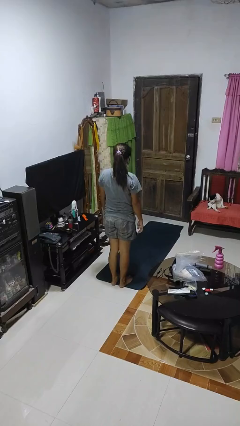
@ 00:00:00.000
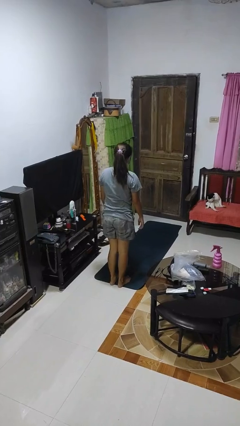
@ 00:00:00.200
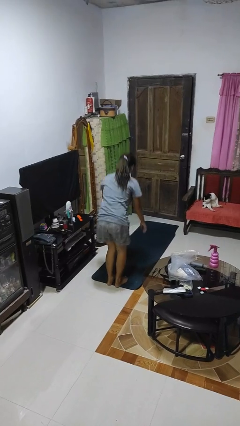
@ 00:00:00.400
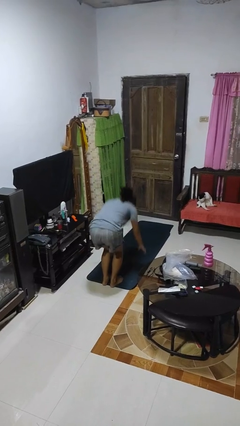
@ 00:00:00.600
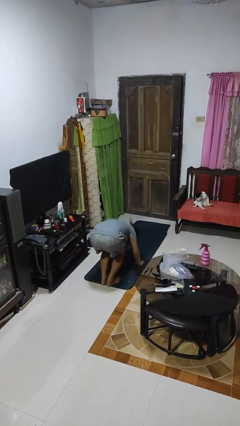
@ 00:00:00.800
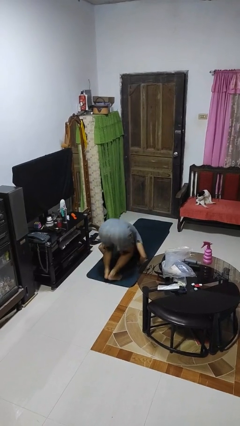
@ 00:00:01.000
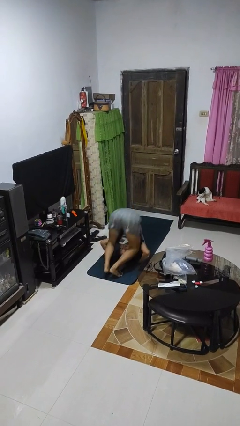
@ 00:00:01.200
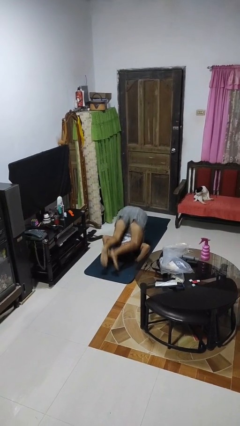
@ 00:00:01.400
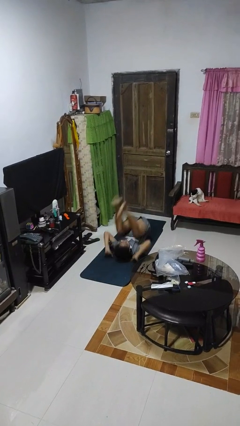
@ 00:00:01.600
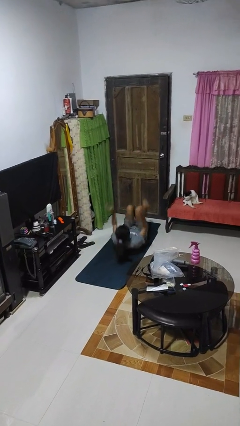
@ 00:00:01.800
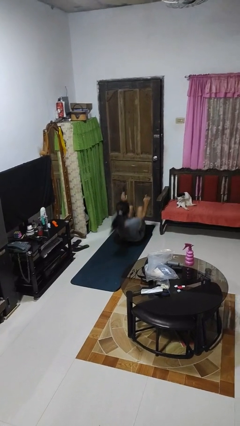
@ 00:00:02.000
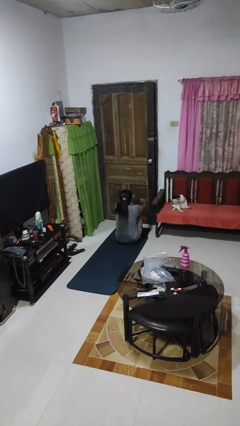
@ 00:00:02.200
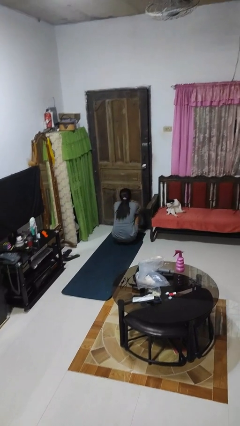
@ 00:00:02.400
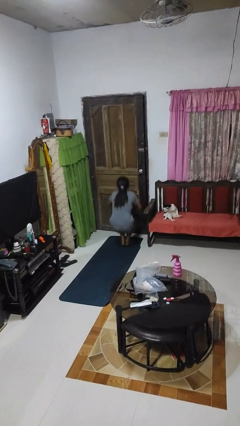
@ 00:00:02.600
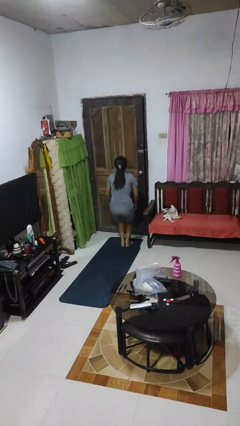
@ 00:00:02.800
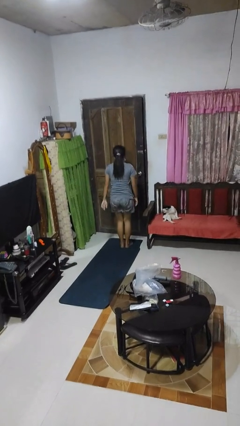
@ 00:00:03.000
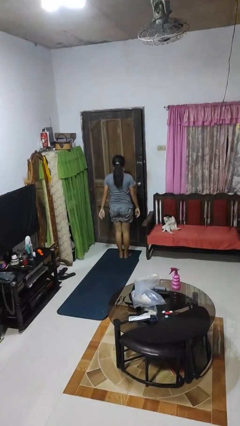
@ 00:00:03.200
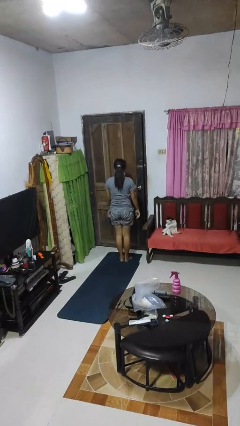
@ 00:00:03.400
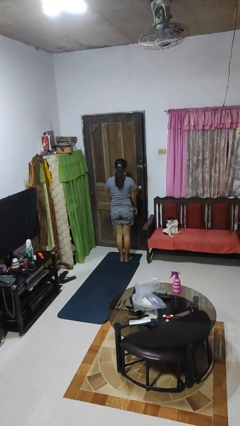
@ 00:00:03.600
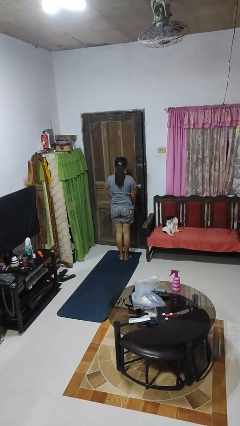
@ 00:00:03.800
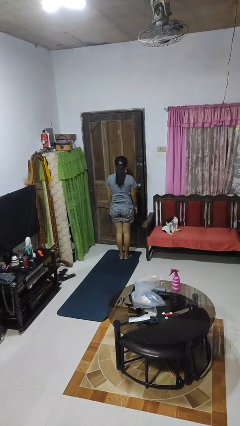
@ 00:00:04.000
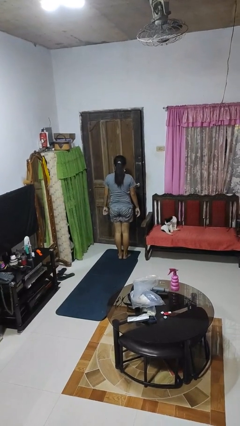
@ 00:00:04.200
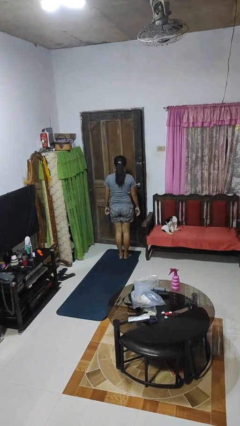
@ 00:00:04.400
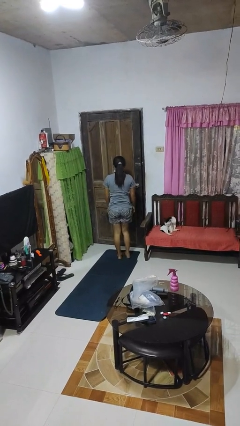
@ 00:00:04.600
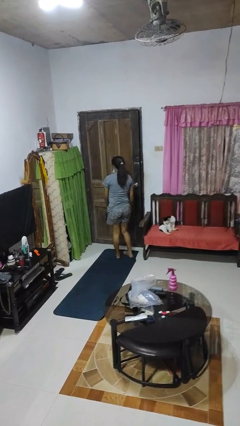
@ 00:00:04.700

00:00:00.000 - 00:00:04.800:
person somersaults

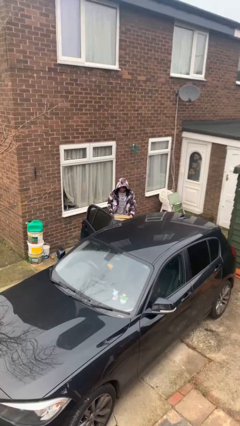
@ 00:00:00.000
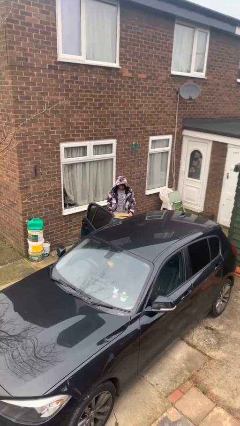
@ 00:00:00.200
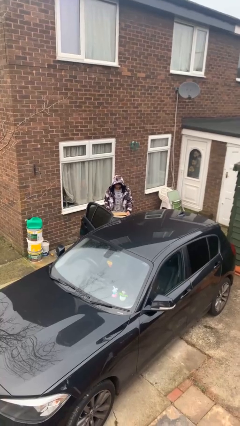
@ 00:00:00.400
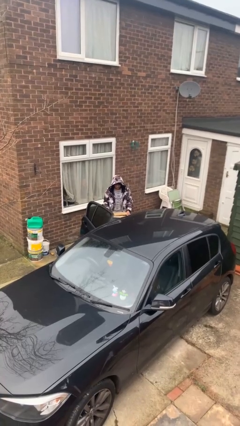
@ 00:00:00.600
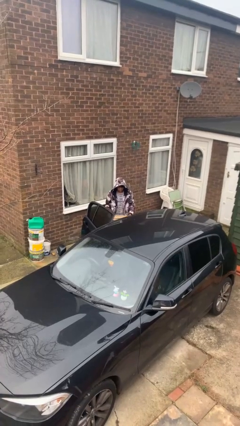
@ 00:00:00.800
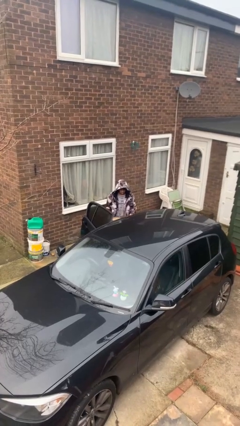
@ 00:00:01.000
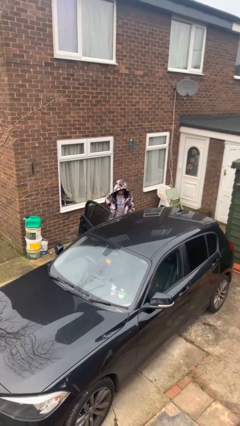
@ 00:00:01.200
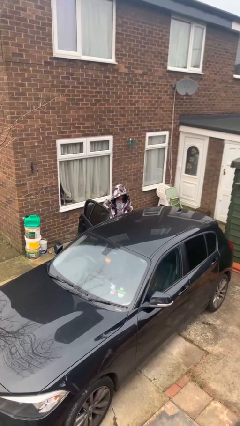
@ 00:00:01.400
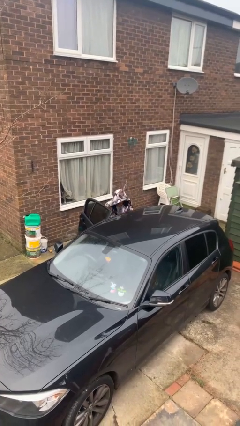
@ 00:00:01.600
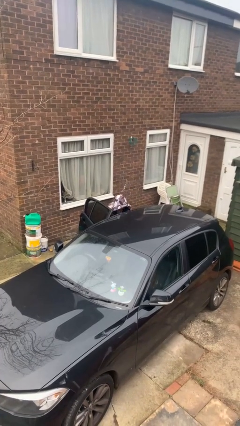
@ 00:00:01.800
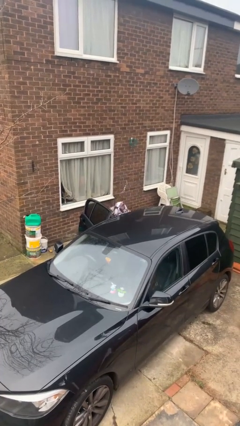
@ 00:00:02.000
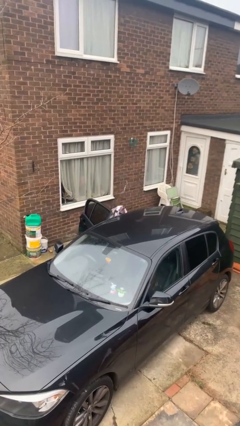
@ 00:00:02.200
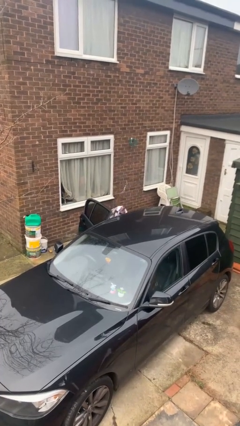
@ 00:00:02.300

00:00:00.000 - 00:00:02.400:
person loads car

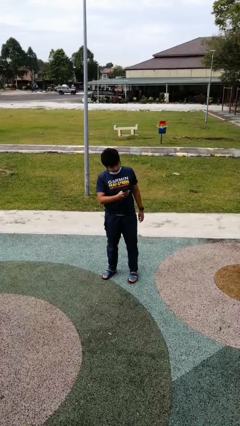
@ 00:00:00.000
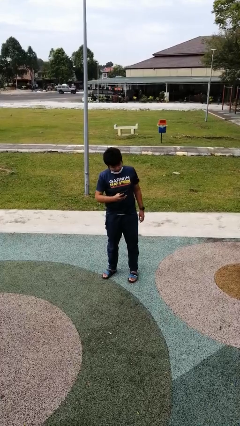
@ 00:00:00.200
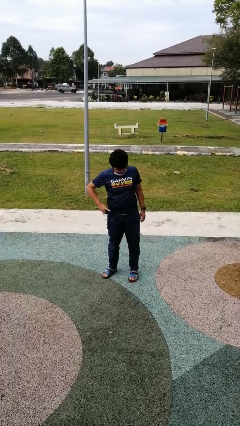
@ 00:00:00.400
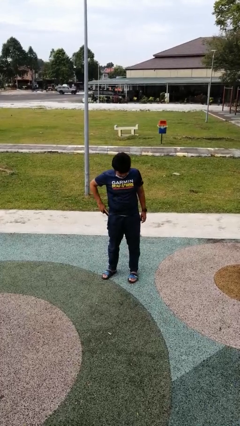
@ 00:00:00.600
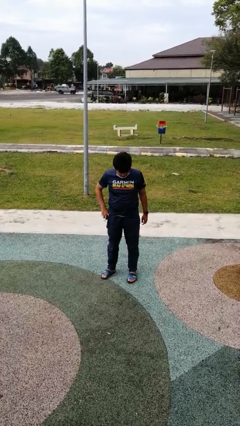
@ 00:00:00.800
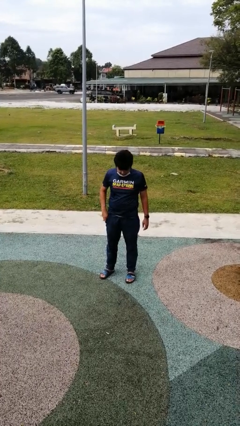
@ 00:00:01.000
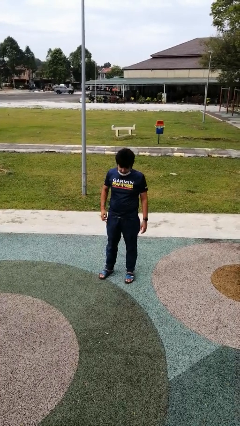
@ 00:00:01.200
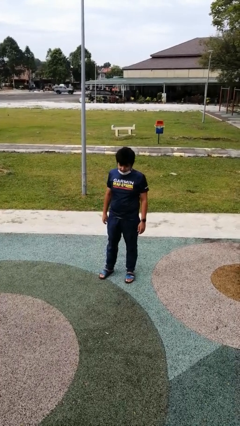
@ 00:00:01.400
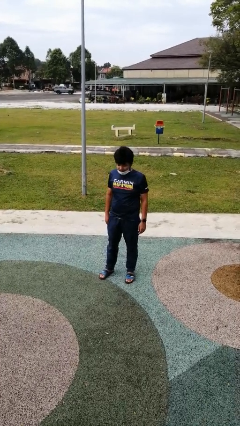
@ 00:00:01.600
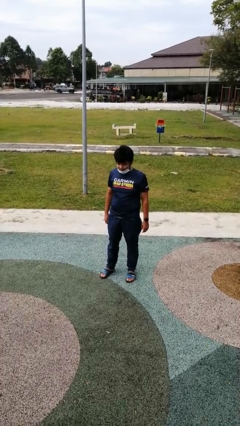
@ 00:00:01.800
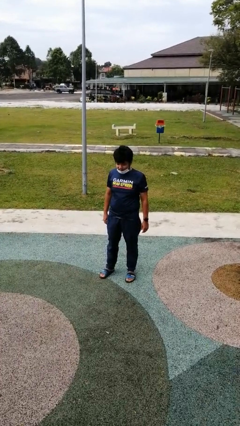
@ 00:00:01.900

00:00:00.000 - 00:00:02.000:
person puts phone into pocket

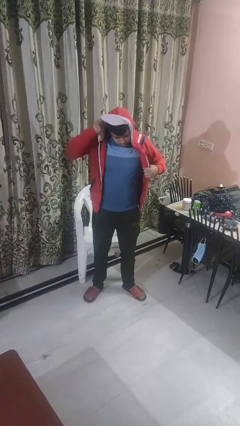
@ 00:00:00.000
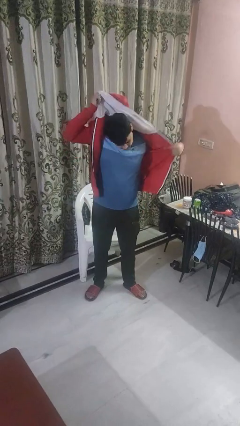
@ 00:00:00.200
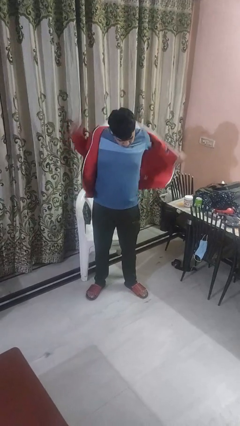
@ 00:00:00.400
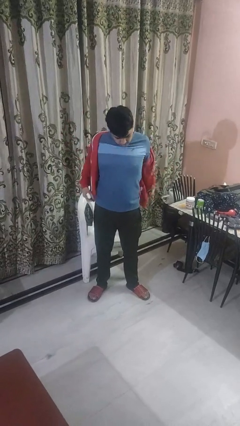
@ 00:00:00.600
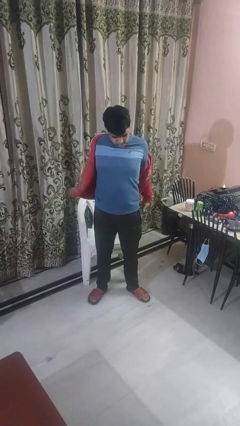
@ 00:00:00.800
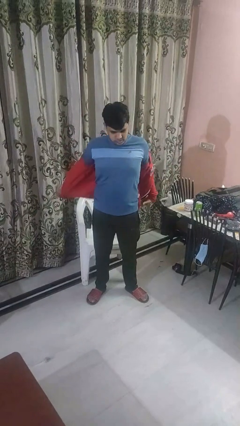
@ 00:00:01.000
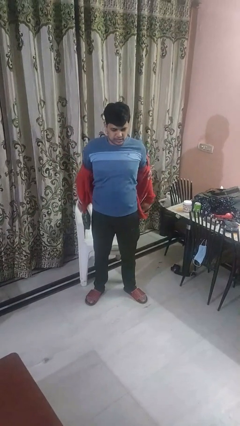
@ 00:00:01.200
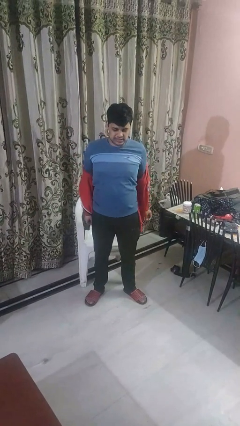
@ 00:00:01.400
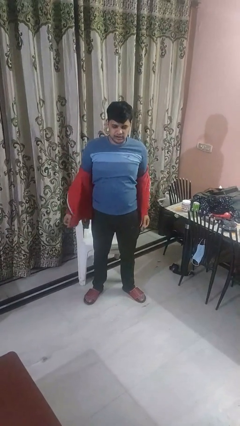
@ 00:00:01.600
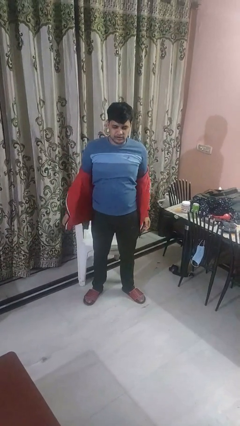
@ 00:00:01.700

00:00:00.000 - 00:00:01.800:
person takes off hoodie

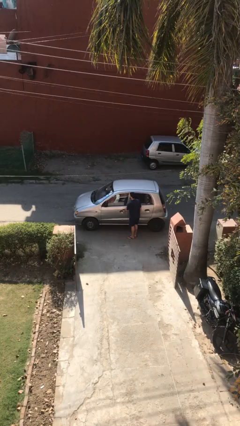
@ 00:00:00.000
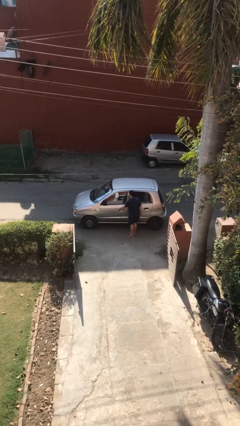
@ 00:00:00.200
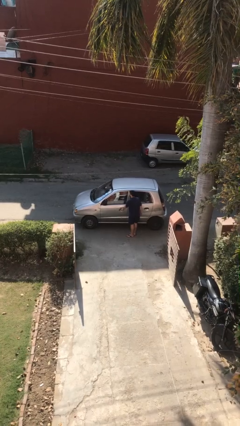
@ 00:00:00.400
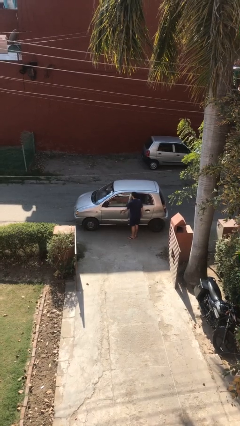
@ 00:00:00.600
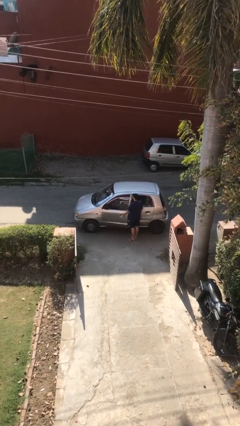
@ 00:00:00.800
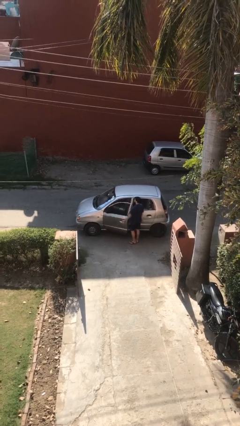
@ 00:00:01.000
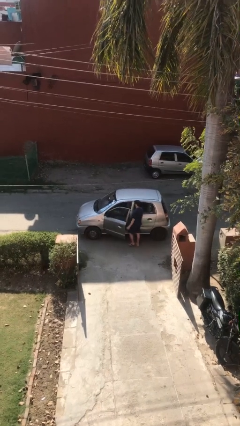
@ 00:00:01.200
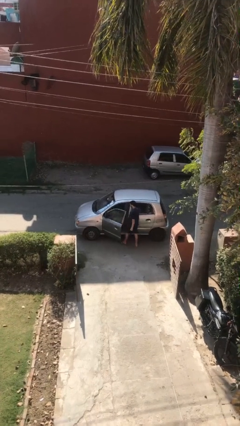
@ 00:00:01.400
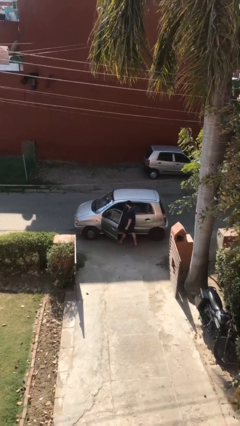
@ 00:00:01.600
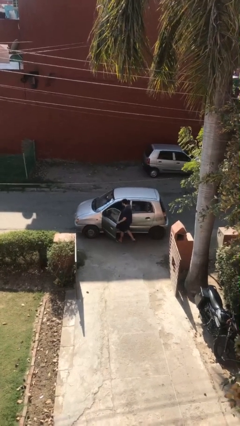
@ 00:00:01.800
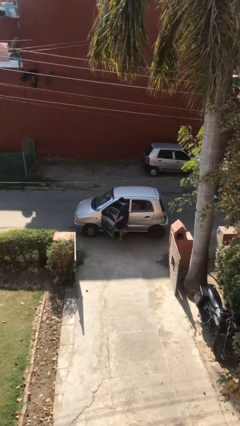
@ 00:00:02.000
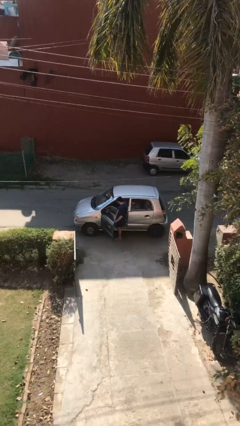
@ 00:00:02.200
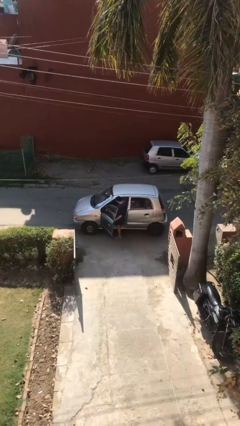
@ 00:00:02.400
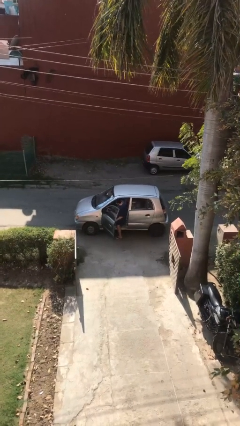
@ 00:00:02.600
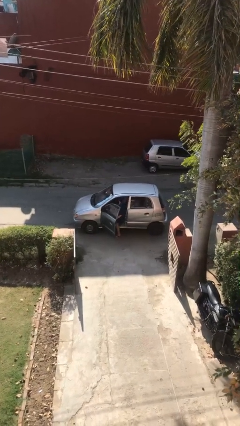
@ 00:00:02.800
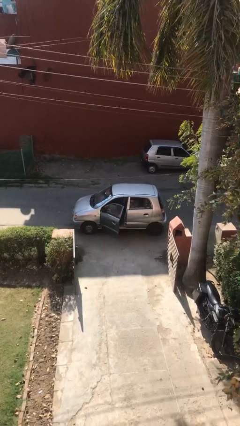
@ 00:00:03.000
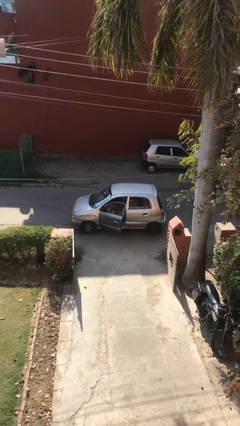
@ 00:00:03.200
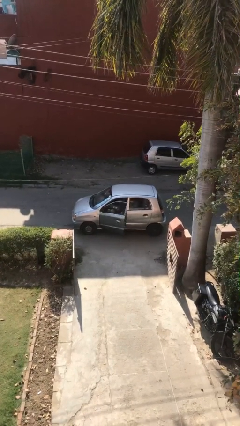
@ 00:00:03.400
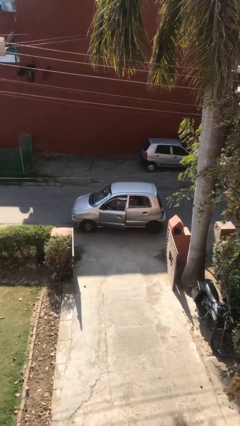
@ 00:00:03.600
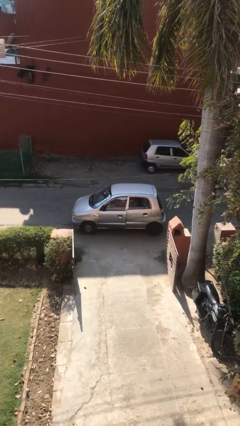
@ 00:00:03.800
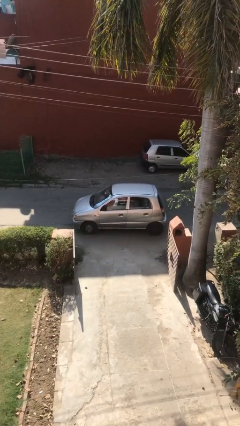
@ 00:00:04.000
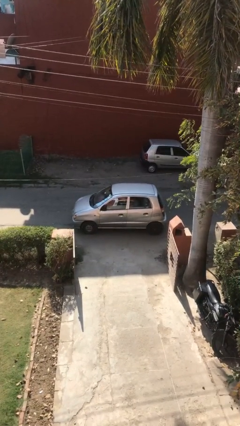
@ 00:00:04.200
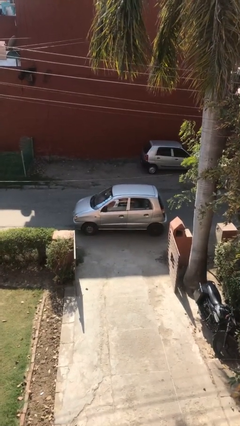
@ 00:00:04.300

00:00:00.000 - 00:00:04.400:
car picks up person

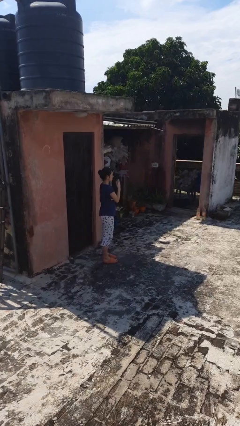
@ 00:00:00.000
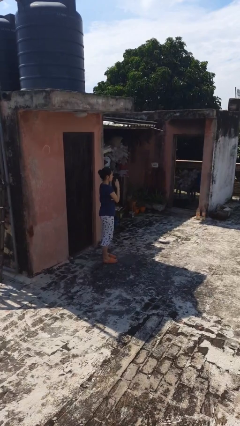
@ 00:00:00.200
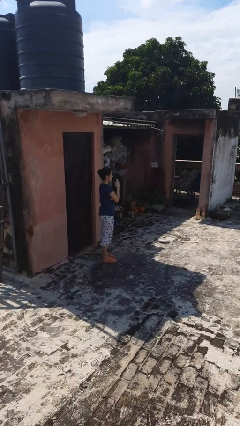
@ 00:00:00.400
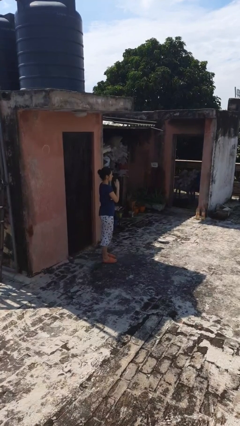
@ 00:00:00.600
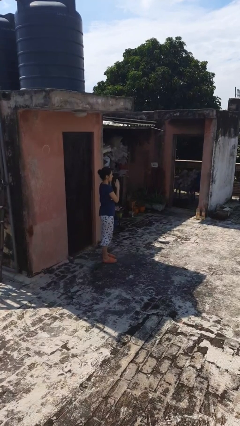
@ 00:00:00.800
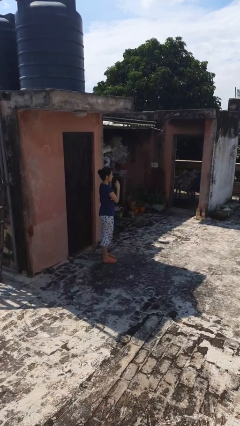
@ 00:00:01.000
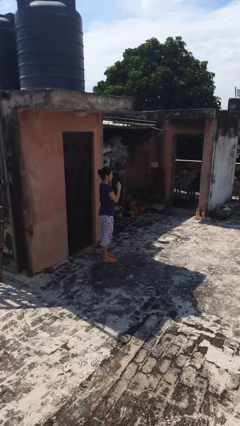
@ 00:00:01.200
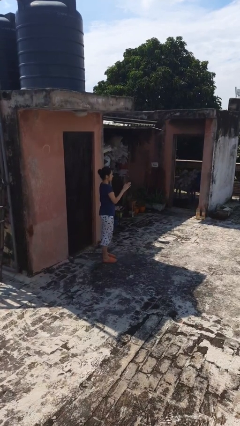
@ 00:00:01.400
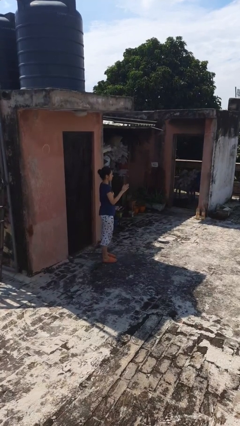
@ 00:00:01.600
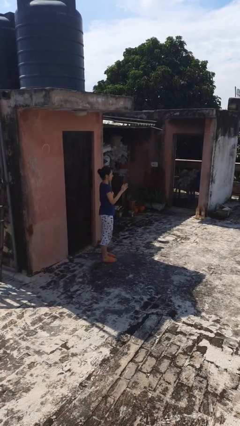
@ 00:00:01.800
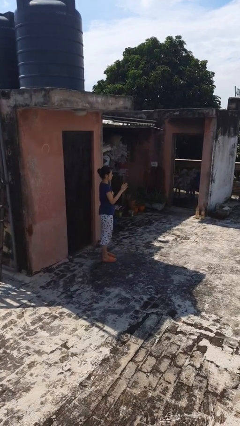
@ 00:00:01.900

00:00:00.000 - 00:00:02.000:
person gestures swipe left
